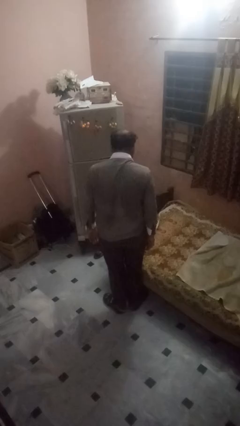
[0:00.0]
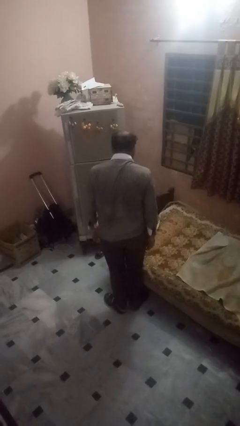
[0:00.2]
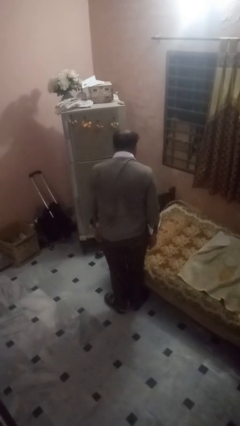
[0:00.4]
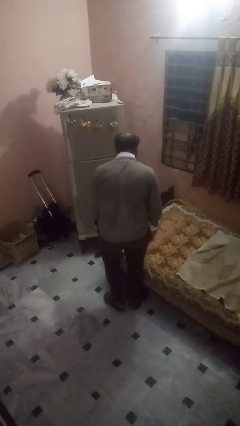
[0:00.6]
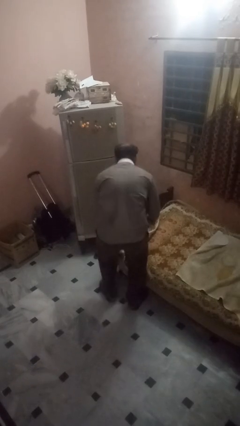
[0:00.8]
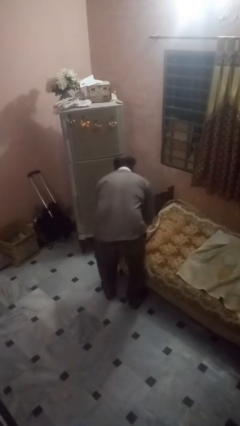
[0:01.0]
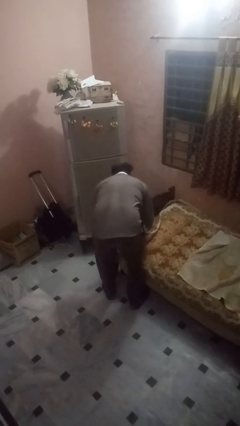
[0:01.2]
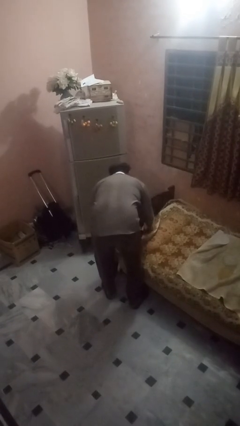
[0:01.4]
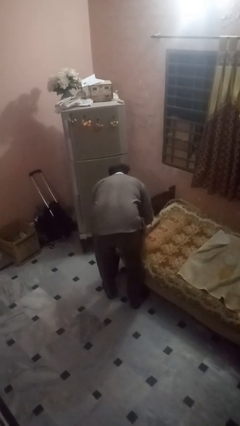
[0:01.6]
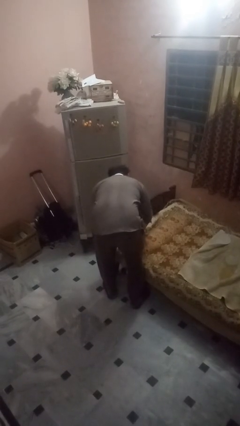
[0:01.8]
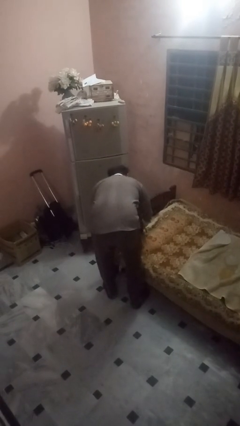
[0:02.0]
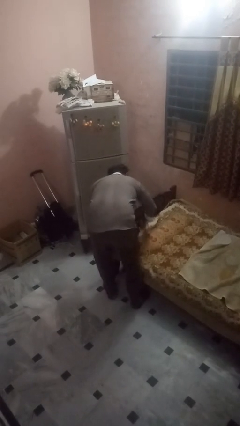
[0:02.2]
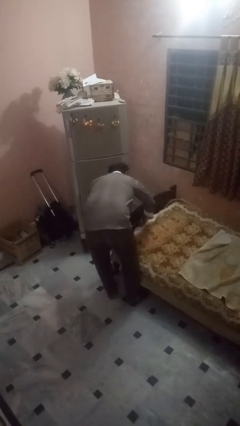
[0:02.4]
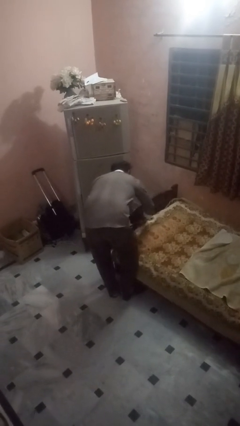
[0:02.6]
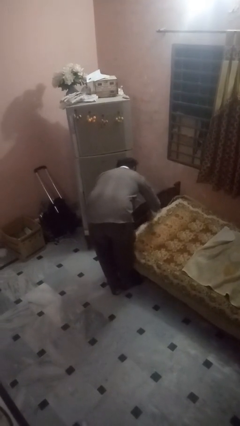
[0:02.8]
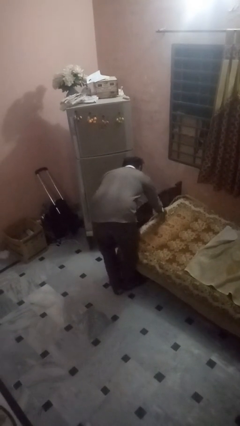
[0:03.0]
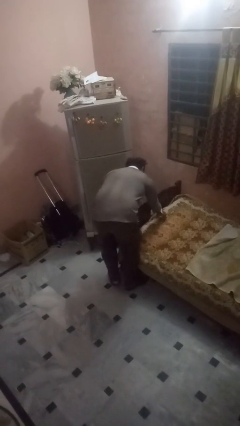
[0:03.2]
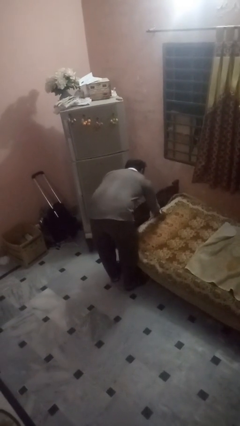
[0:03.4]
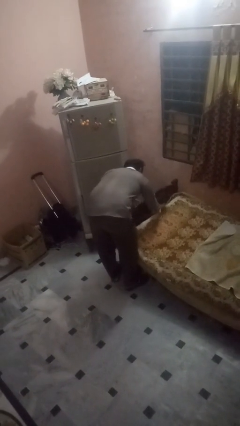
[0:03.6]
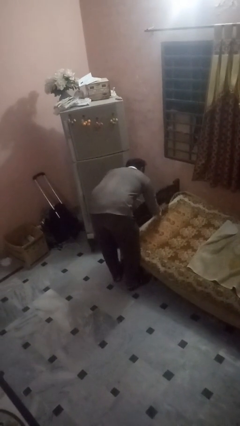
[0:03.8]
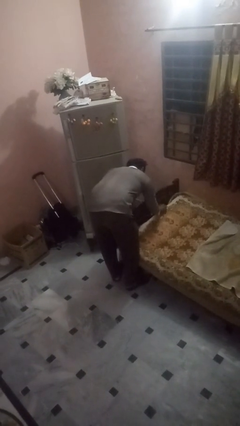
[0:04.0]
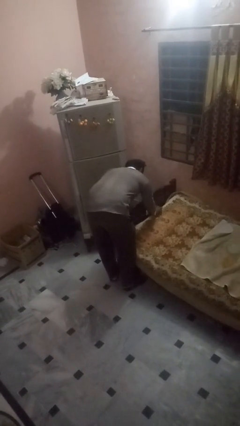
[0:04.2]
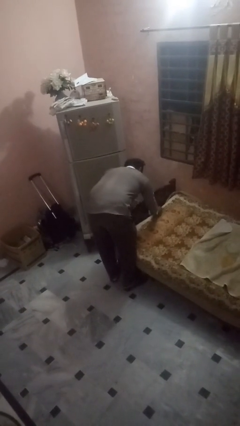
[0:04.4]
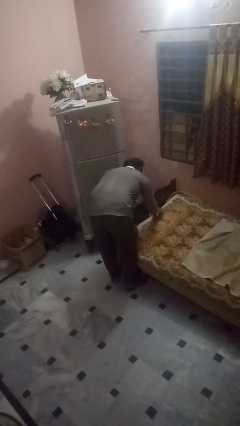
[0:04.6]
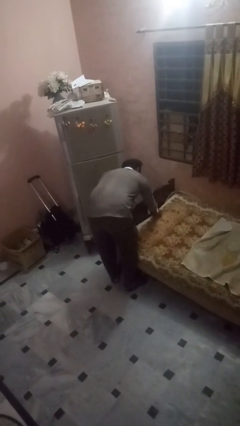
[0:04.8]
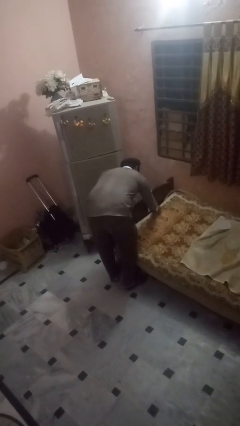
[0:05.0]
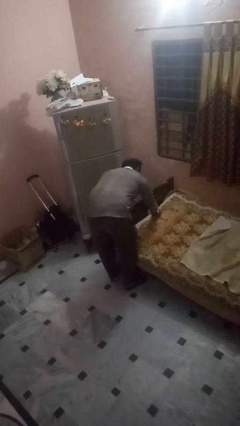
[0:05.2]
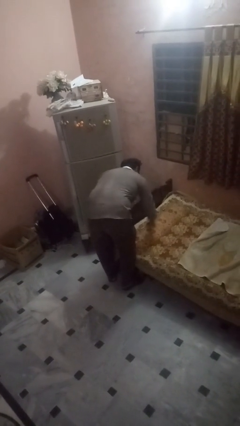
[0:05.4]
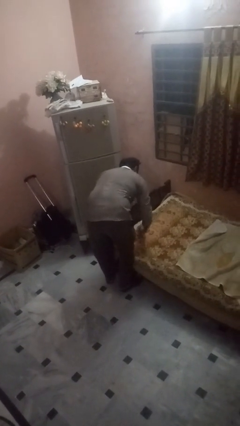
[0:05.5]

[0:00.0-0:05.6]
person makes bed

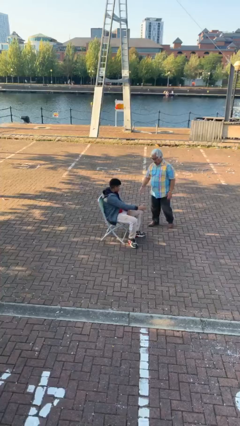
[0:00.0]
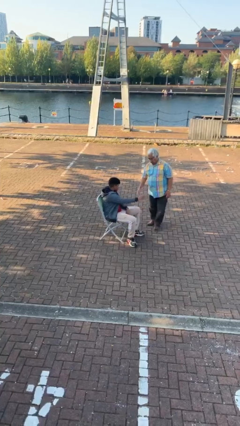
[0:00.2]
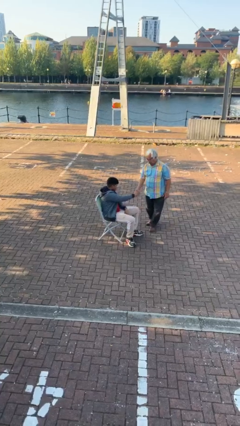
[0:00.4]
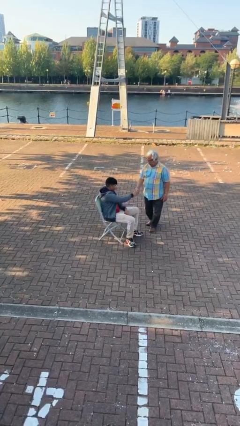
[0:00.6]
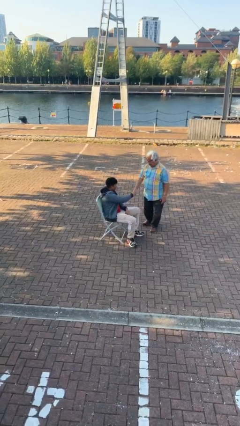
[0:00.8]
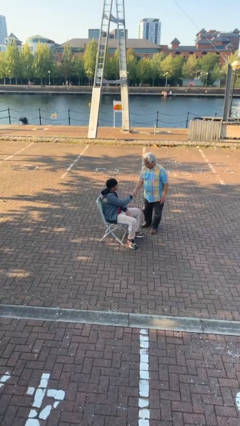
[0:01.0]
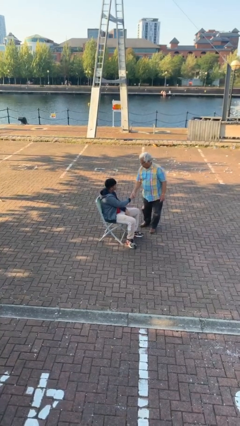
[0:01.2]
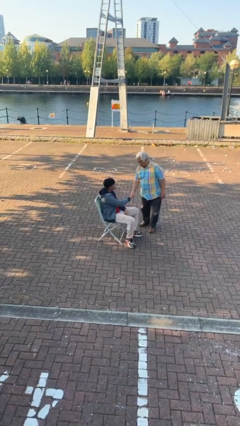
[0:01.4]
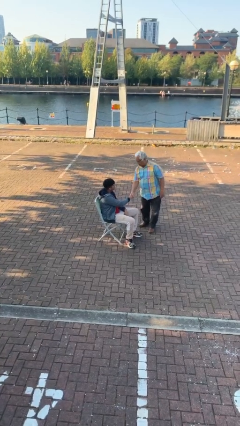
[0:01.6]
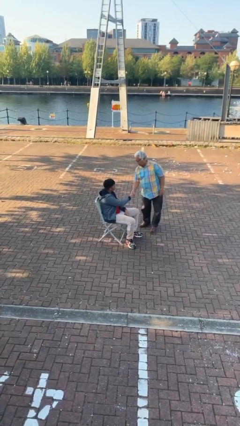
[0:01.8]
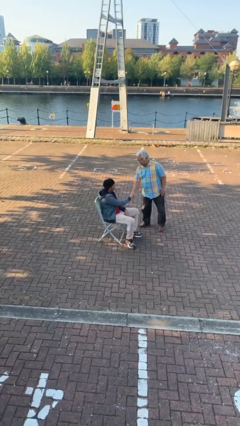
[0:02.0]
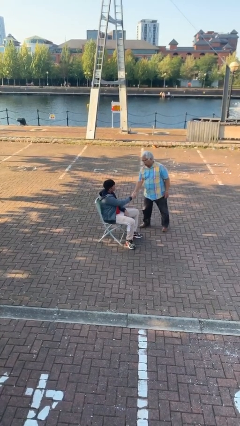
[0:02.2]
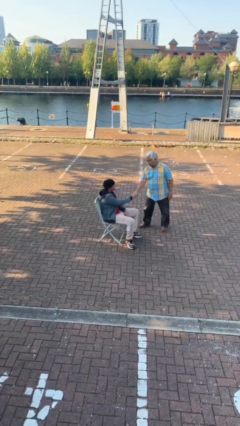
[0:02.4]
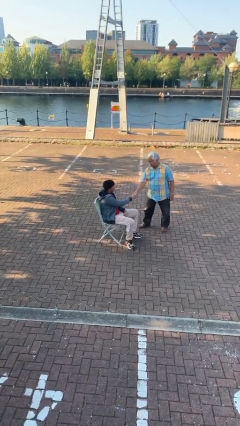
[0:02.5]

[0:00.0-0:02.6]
person shakes hand

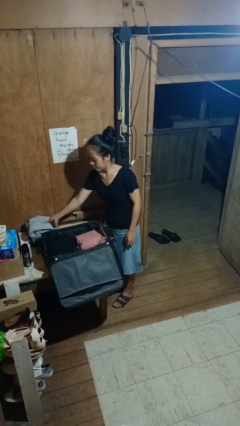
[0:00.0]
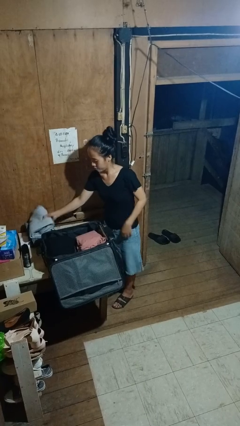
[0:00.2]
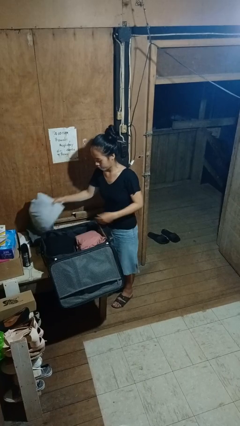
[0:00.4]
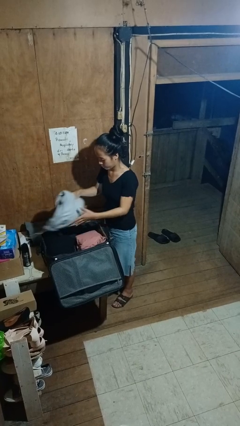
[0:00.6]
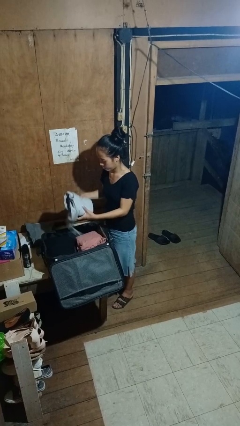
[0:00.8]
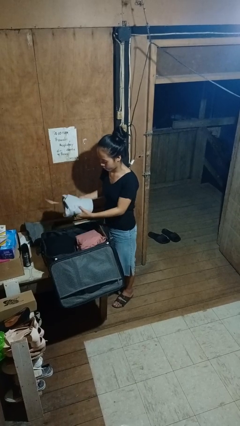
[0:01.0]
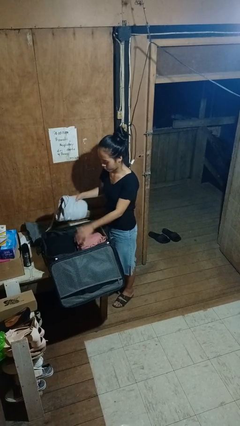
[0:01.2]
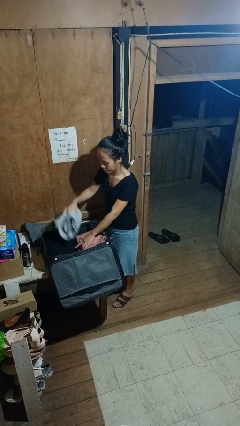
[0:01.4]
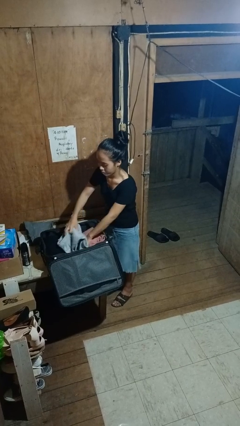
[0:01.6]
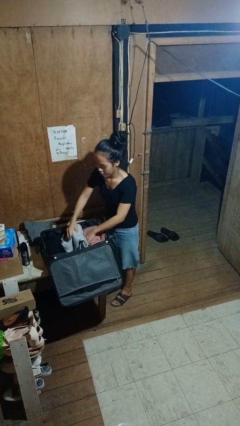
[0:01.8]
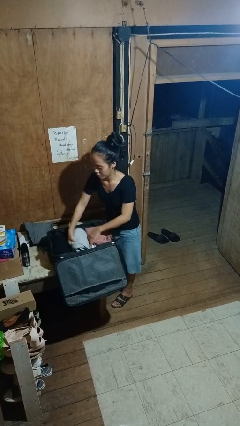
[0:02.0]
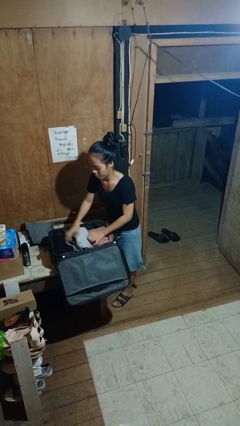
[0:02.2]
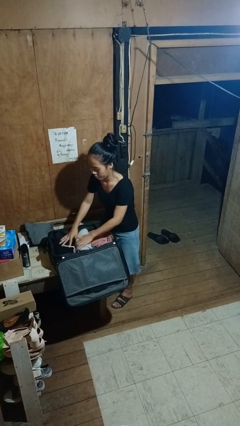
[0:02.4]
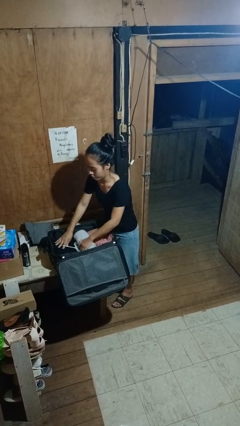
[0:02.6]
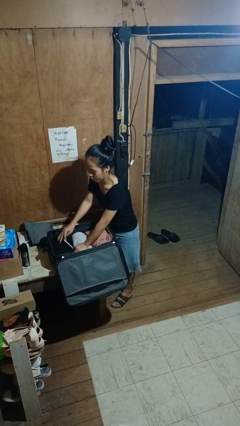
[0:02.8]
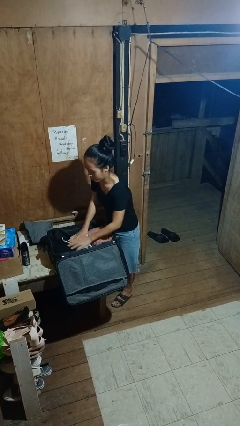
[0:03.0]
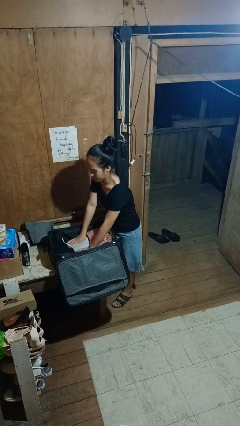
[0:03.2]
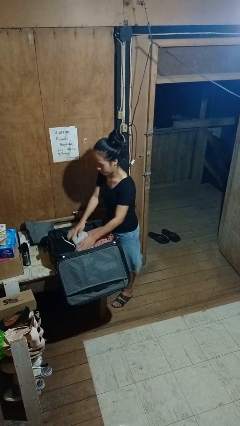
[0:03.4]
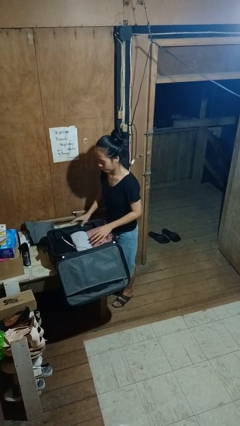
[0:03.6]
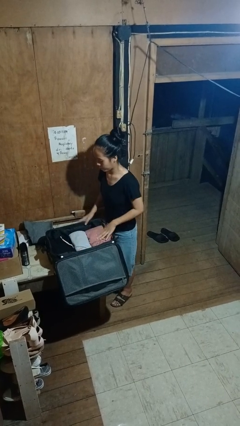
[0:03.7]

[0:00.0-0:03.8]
person loads clothes into suitcase

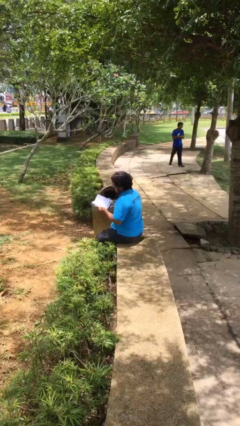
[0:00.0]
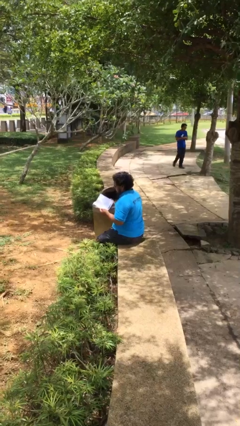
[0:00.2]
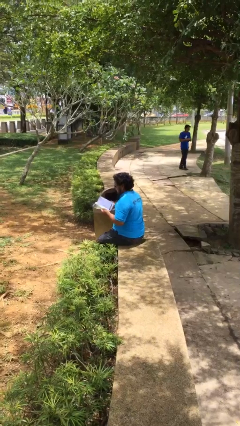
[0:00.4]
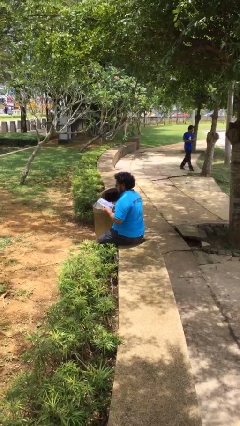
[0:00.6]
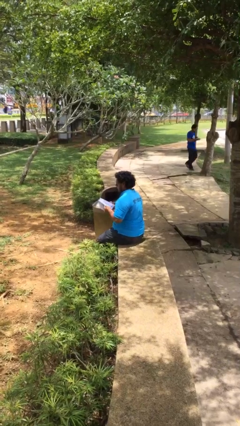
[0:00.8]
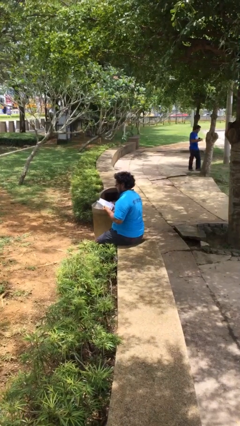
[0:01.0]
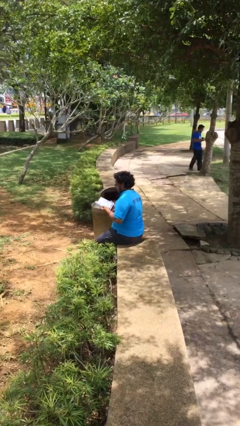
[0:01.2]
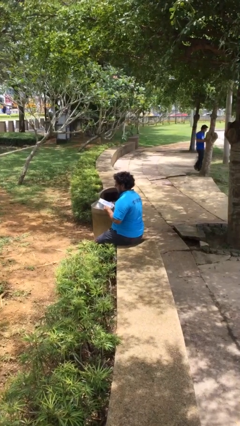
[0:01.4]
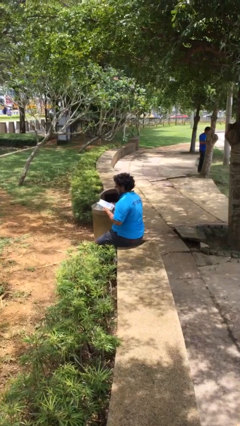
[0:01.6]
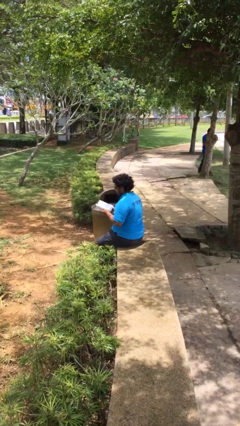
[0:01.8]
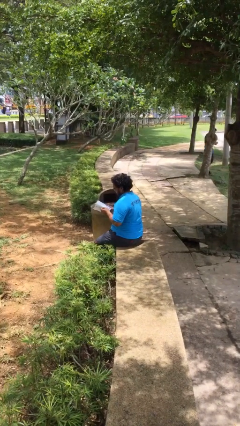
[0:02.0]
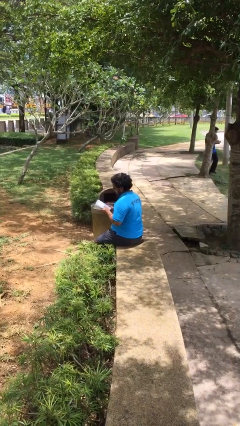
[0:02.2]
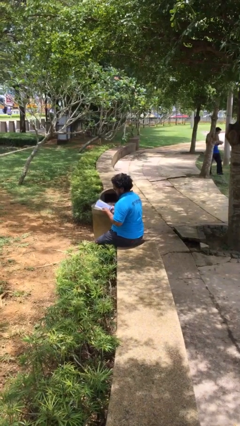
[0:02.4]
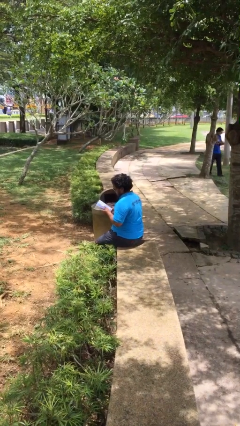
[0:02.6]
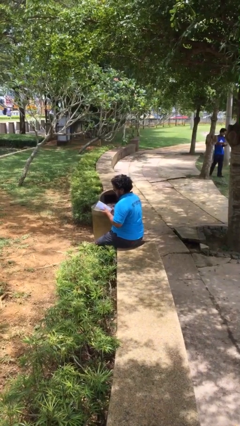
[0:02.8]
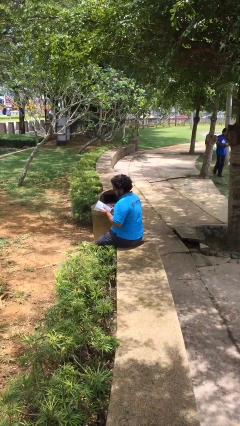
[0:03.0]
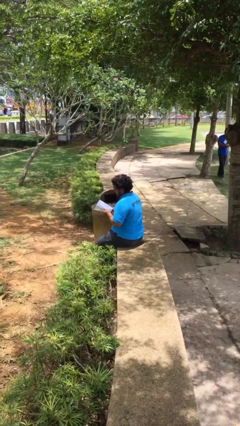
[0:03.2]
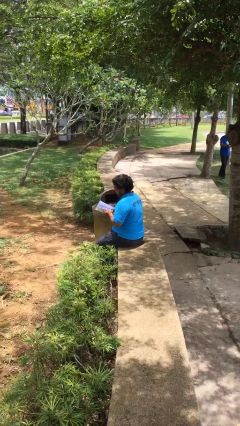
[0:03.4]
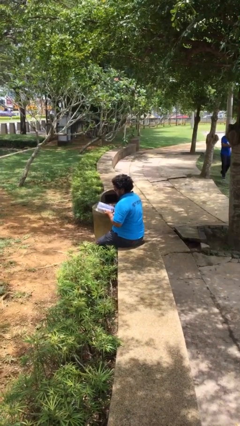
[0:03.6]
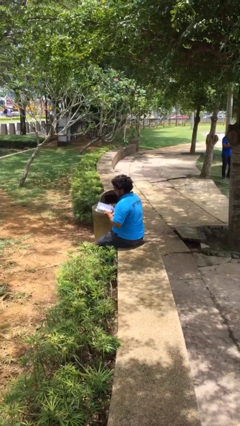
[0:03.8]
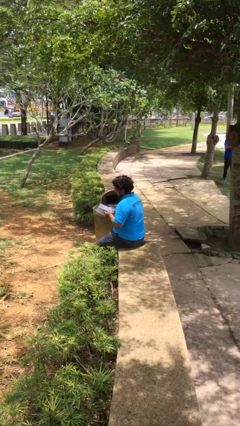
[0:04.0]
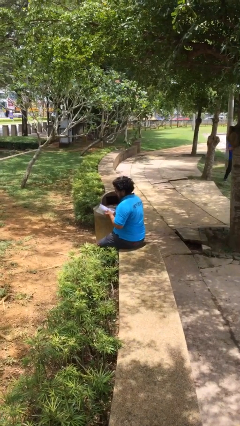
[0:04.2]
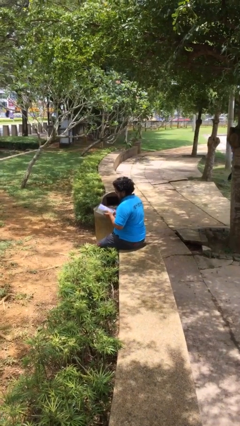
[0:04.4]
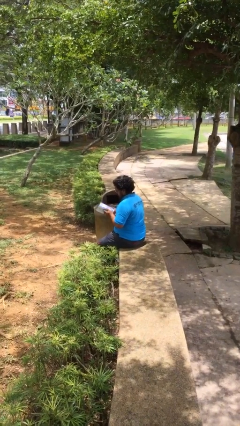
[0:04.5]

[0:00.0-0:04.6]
person reads document

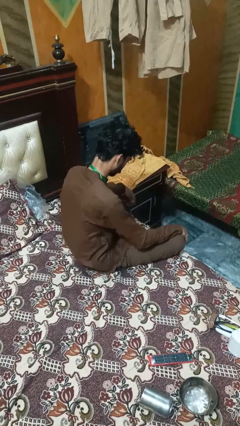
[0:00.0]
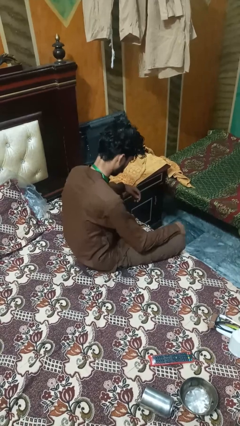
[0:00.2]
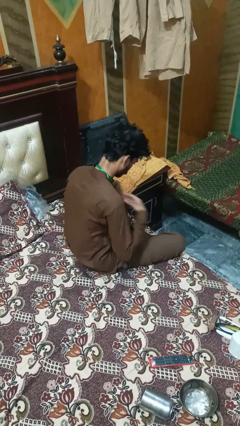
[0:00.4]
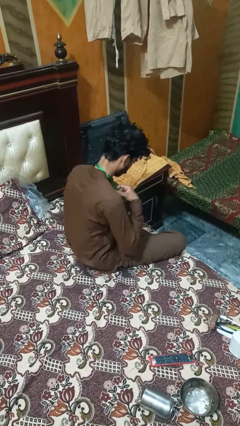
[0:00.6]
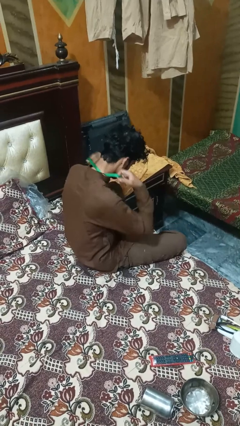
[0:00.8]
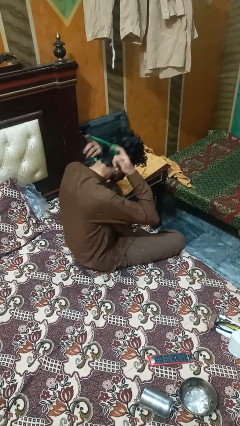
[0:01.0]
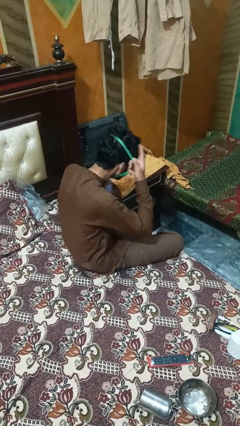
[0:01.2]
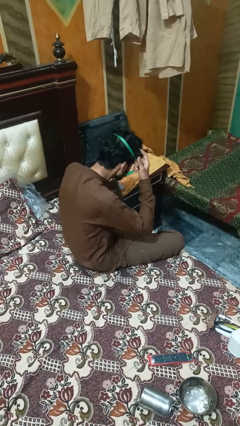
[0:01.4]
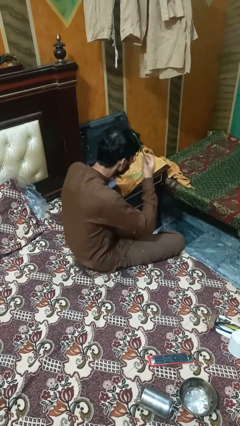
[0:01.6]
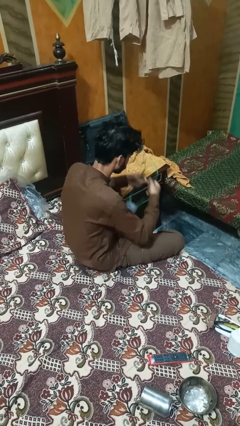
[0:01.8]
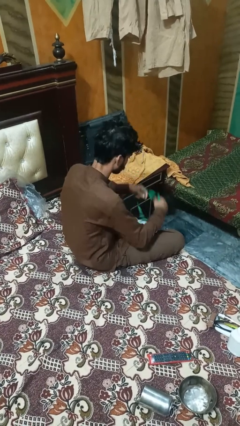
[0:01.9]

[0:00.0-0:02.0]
person takes off necklace
